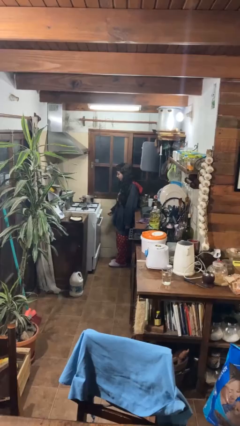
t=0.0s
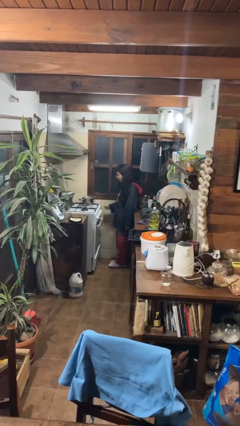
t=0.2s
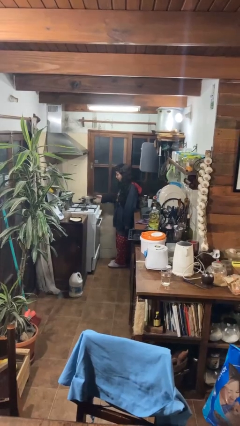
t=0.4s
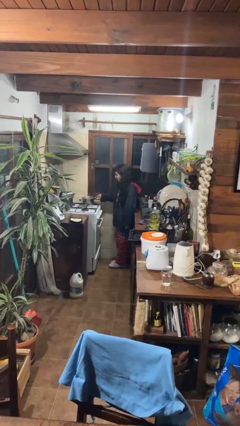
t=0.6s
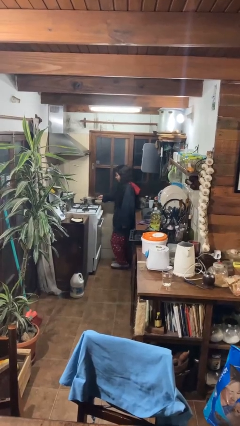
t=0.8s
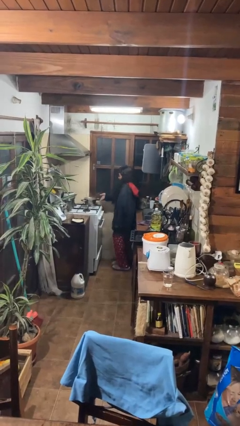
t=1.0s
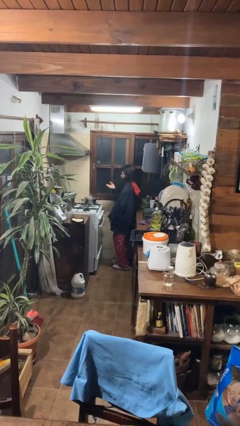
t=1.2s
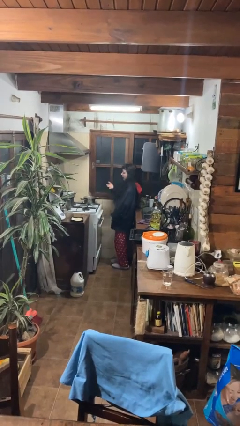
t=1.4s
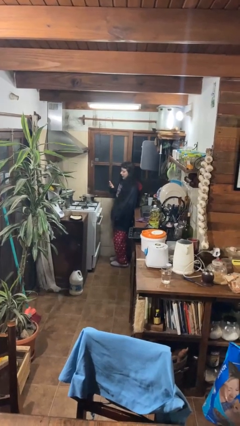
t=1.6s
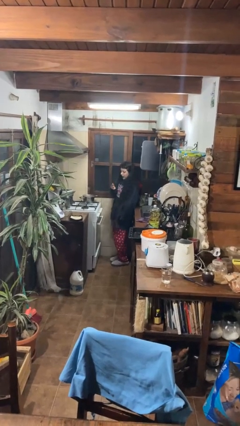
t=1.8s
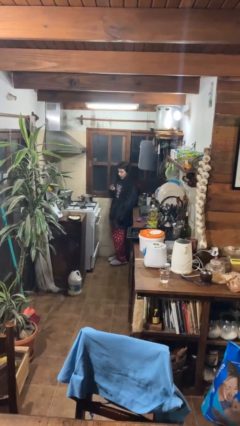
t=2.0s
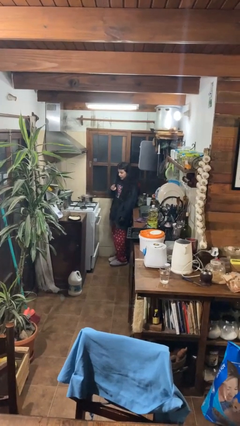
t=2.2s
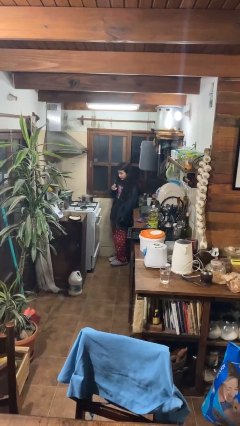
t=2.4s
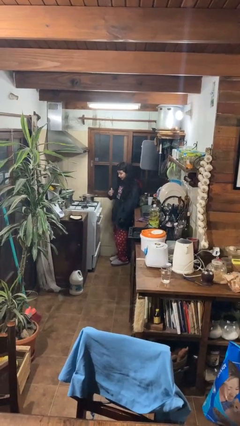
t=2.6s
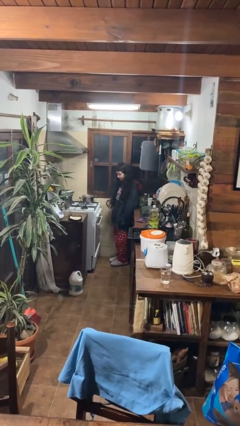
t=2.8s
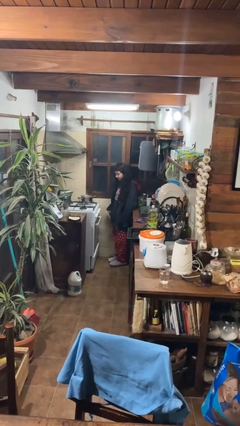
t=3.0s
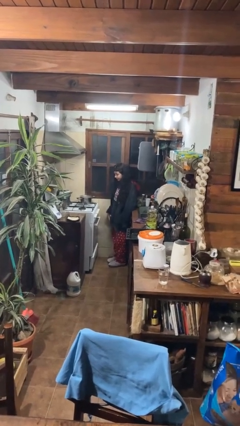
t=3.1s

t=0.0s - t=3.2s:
person burns hand

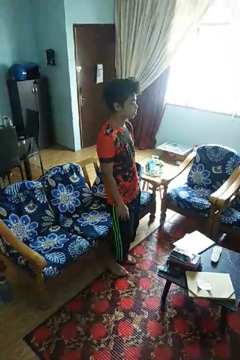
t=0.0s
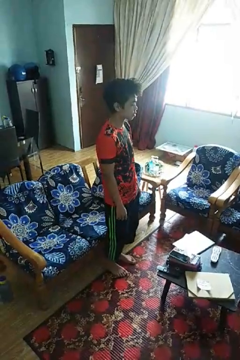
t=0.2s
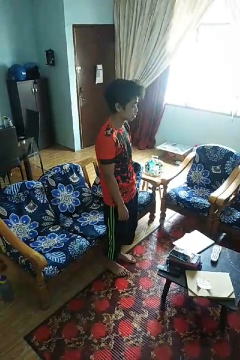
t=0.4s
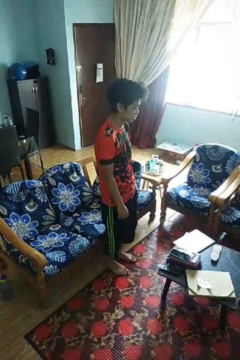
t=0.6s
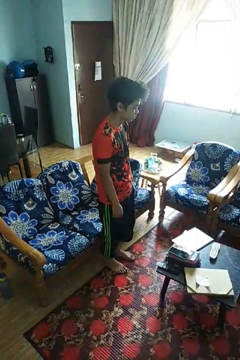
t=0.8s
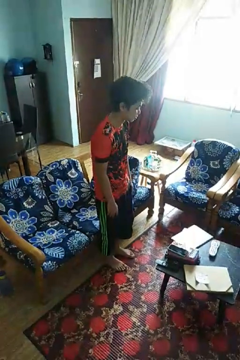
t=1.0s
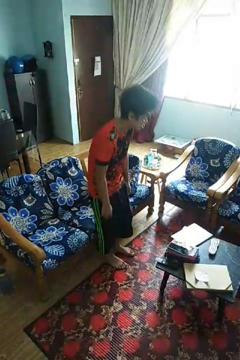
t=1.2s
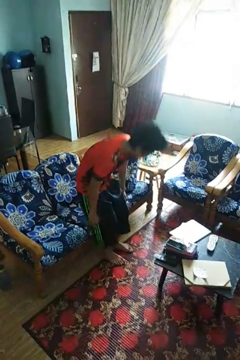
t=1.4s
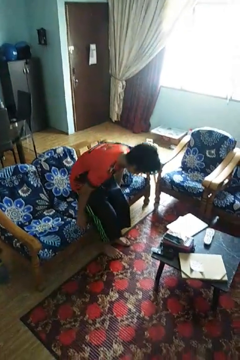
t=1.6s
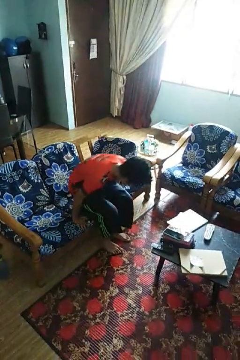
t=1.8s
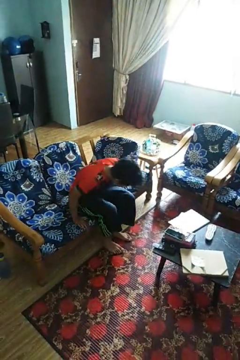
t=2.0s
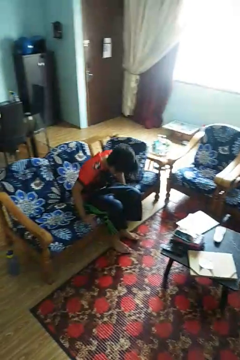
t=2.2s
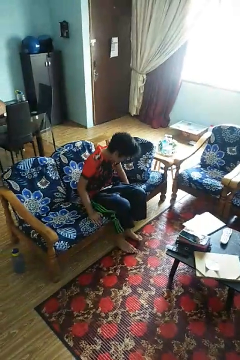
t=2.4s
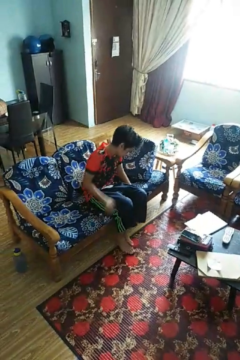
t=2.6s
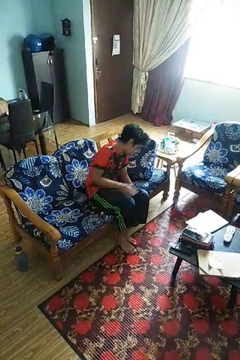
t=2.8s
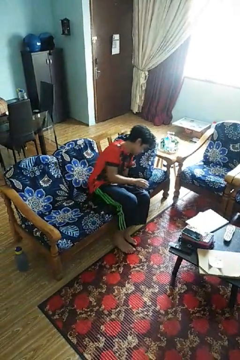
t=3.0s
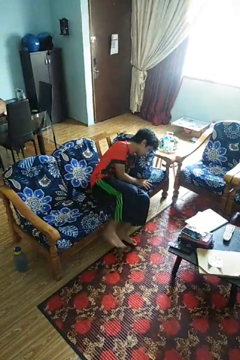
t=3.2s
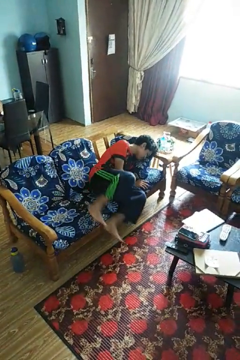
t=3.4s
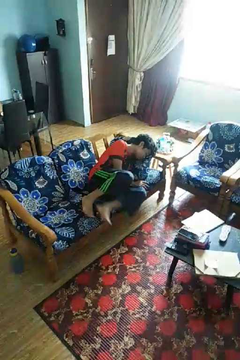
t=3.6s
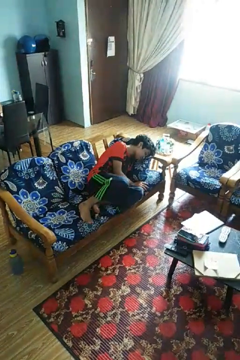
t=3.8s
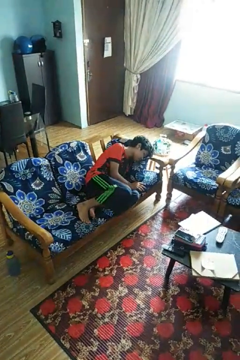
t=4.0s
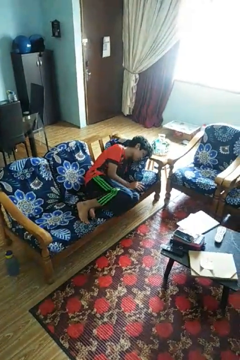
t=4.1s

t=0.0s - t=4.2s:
person lies down on couch

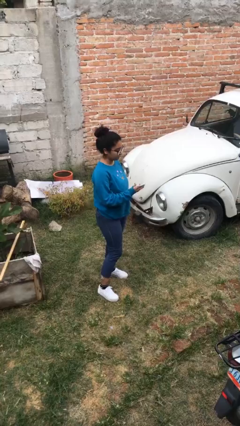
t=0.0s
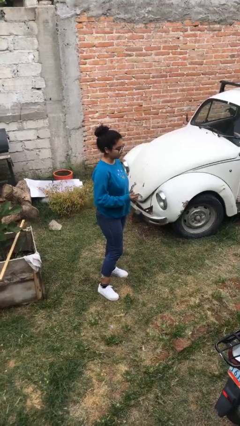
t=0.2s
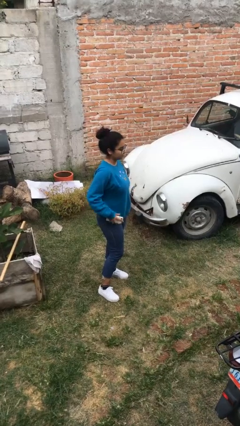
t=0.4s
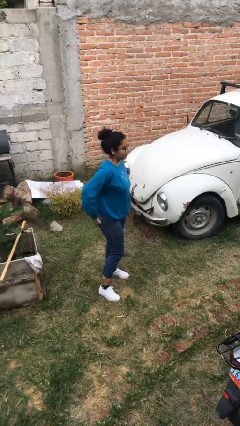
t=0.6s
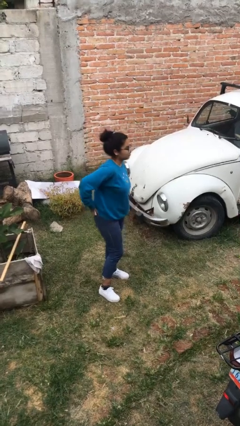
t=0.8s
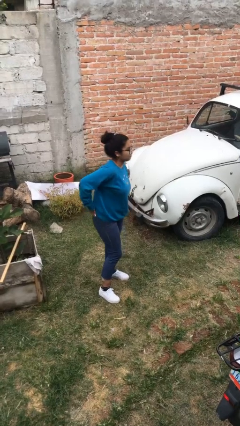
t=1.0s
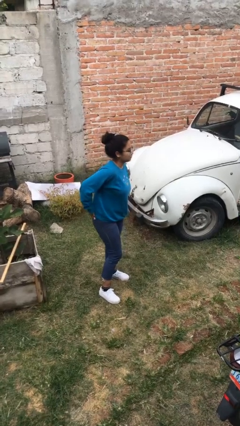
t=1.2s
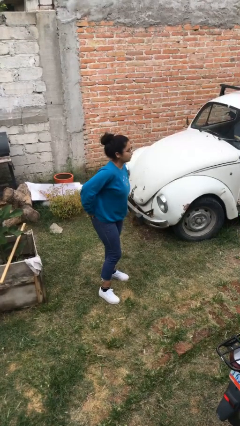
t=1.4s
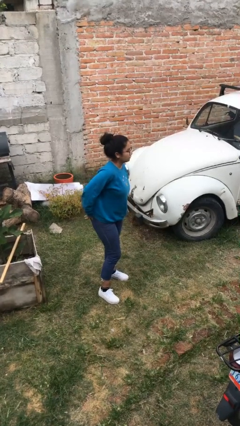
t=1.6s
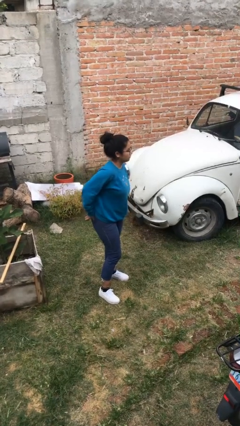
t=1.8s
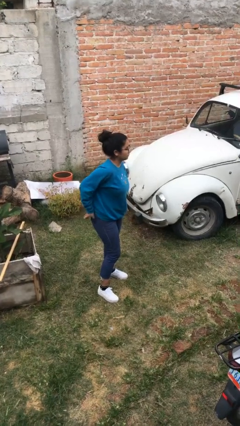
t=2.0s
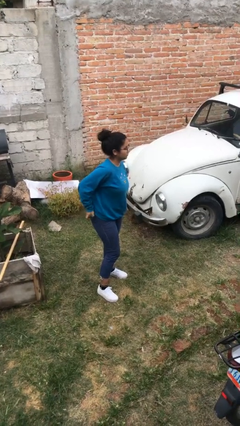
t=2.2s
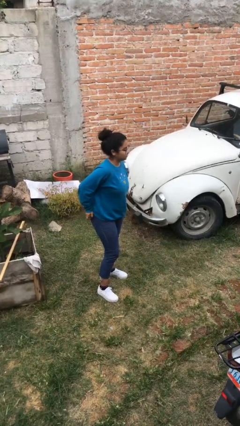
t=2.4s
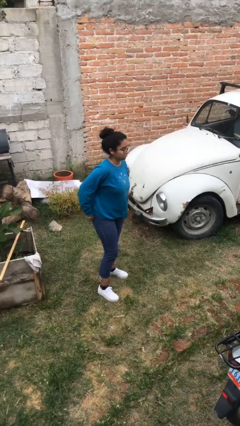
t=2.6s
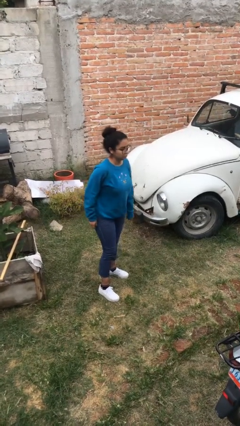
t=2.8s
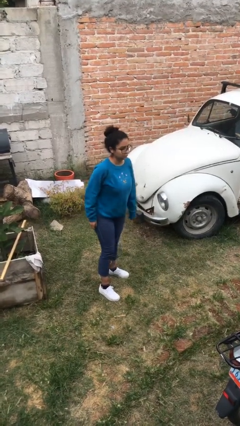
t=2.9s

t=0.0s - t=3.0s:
person puts phone into pocket

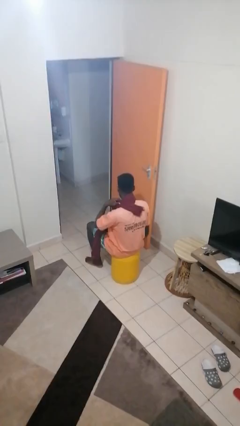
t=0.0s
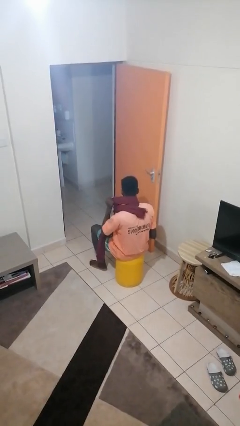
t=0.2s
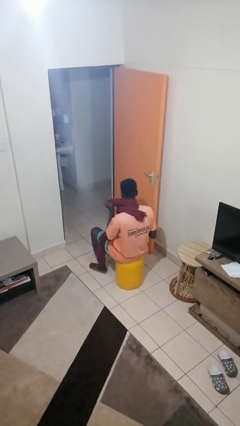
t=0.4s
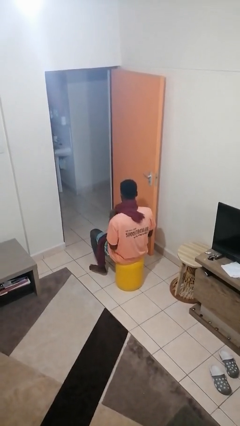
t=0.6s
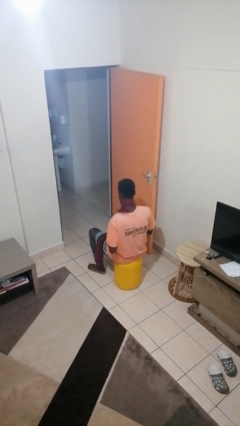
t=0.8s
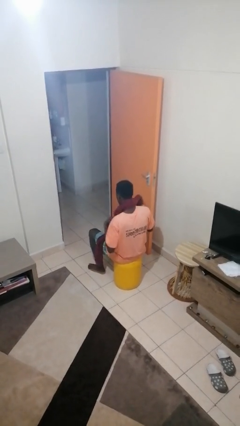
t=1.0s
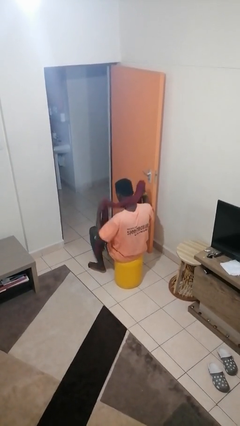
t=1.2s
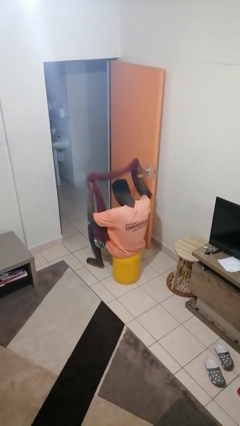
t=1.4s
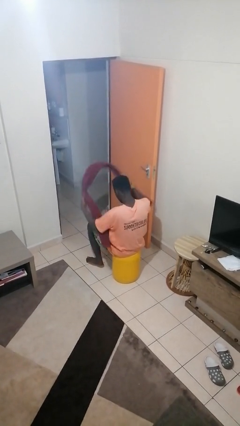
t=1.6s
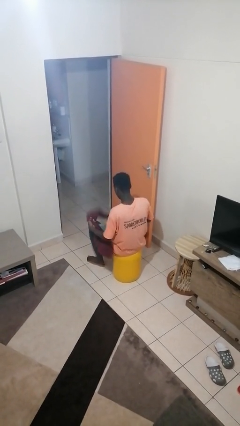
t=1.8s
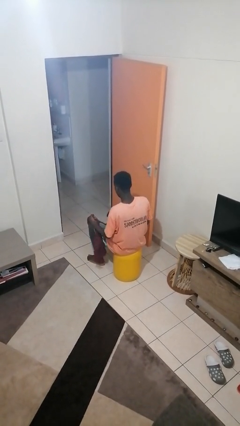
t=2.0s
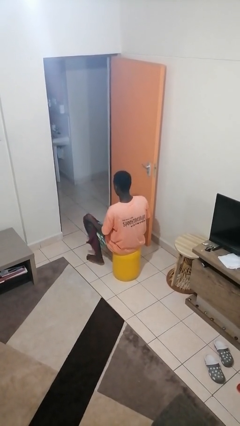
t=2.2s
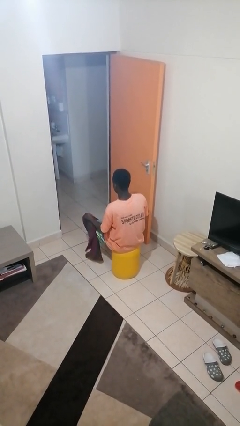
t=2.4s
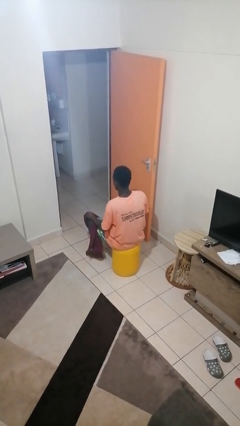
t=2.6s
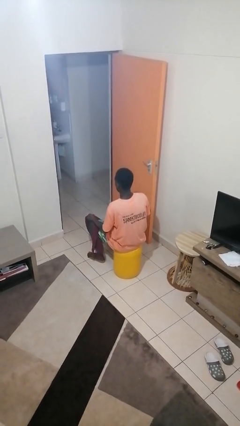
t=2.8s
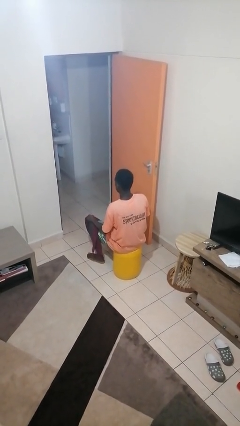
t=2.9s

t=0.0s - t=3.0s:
person takes off scarf

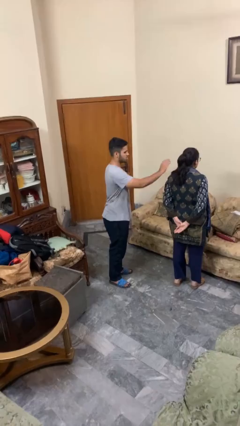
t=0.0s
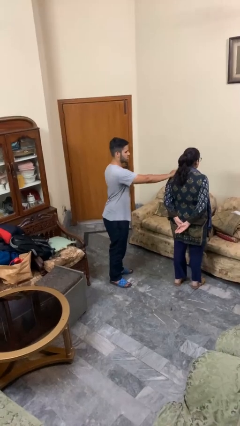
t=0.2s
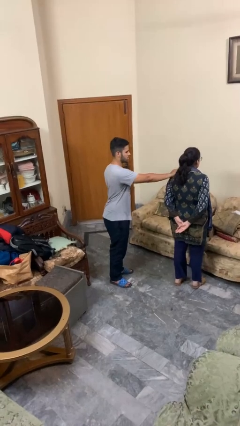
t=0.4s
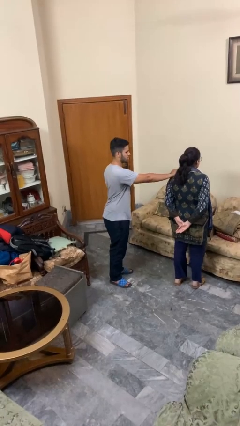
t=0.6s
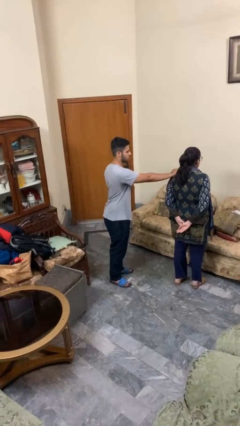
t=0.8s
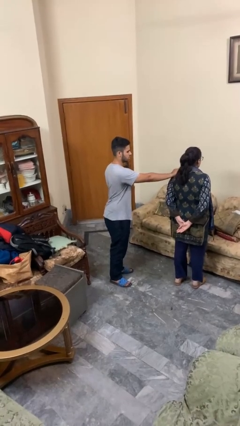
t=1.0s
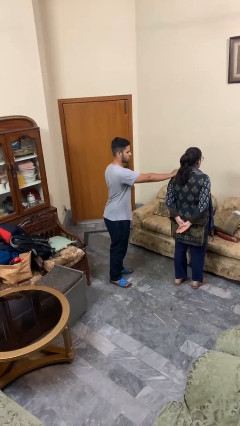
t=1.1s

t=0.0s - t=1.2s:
person grabs person by shoulder

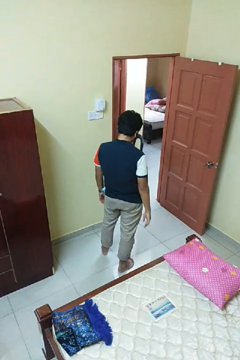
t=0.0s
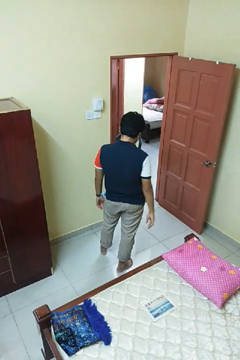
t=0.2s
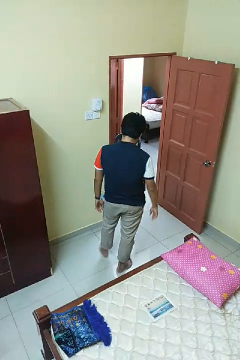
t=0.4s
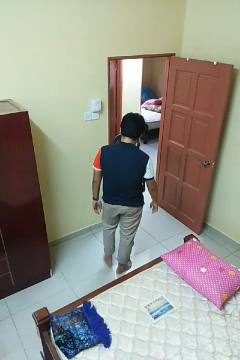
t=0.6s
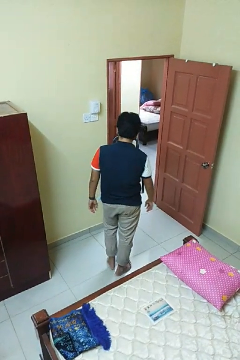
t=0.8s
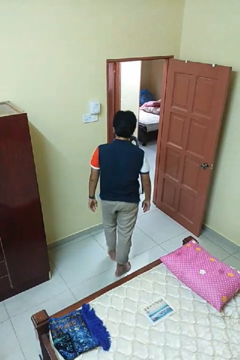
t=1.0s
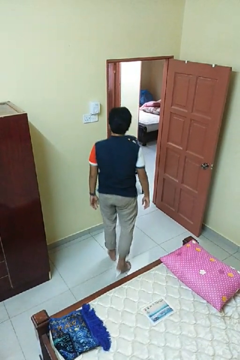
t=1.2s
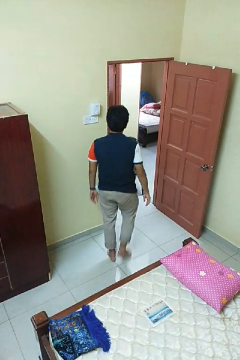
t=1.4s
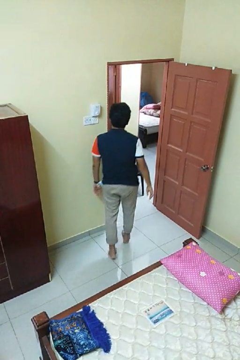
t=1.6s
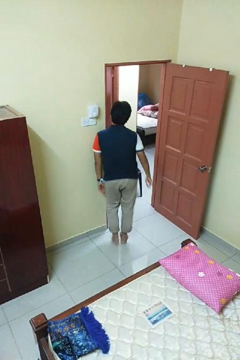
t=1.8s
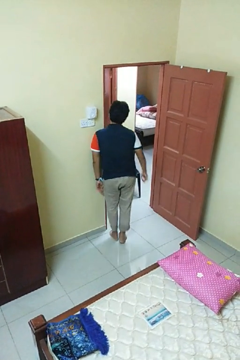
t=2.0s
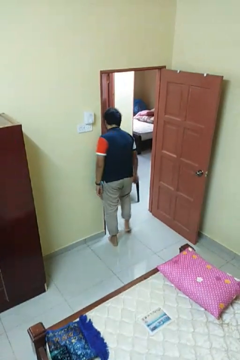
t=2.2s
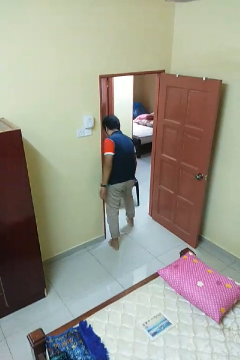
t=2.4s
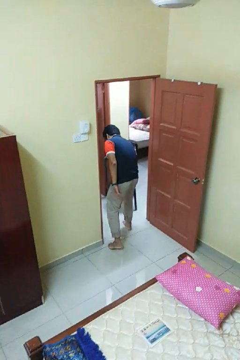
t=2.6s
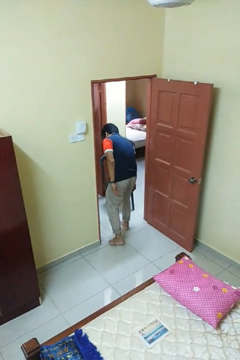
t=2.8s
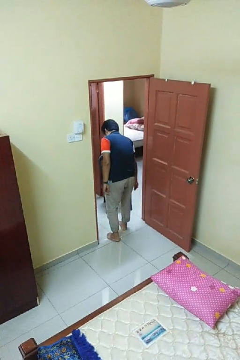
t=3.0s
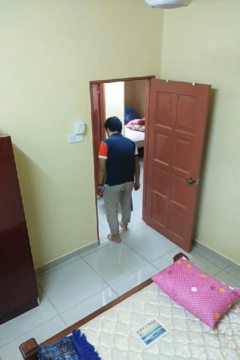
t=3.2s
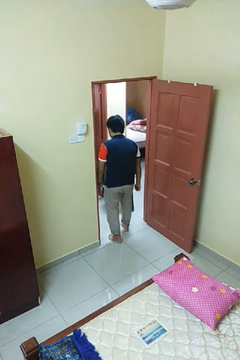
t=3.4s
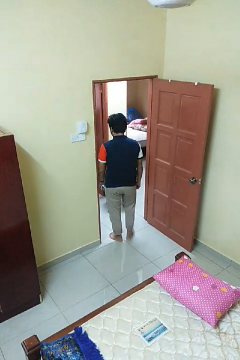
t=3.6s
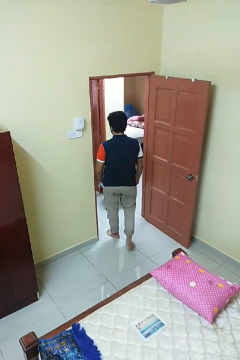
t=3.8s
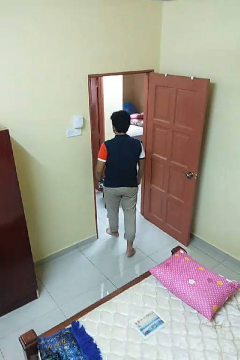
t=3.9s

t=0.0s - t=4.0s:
person bumps into wall

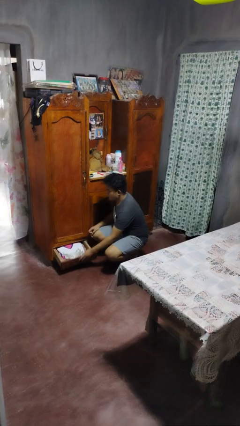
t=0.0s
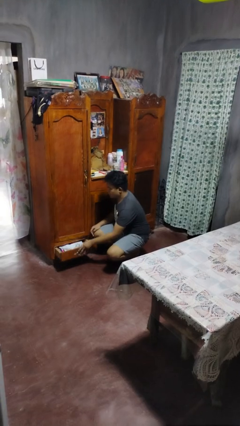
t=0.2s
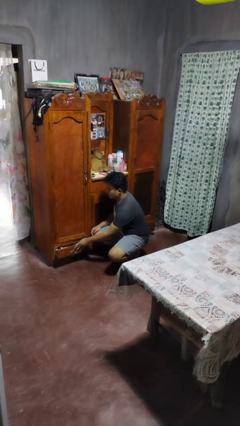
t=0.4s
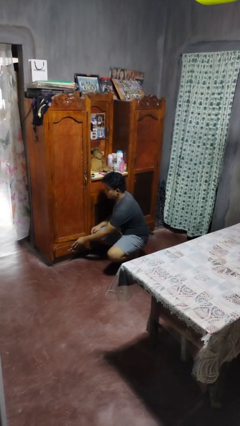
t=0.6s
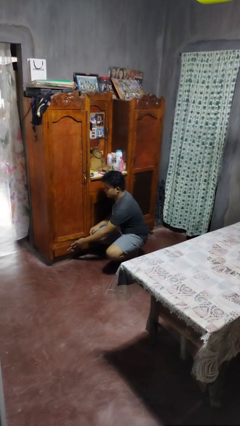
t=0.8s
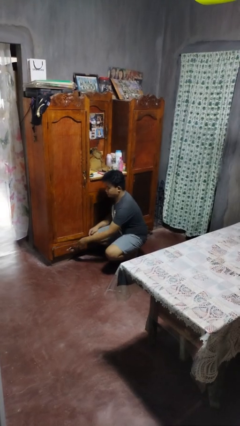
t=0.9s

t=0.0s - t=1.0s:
person closes dresser drawer
